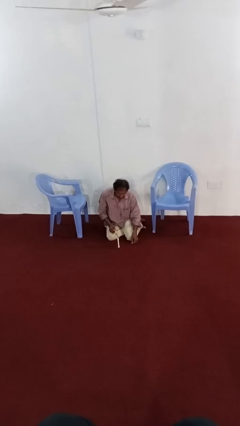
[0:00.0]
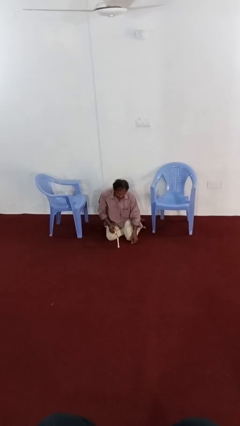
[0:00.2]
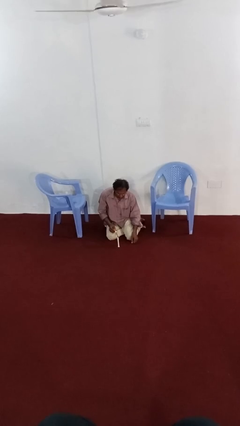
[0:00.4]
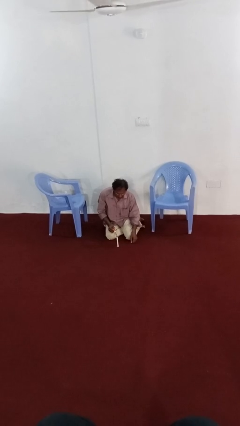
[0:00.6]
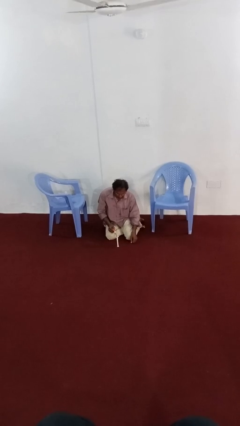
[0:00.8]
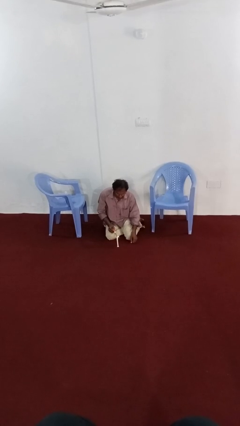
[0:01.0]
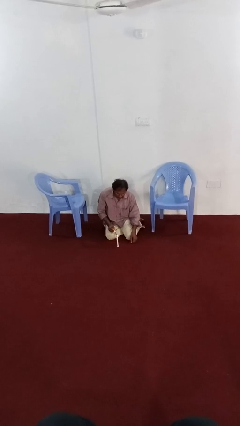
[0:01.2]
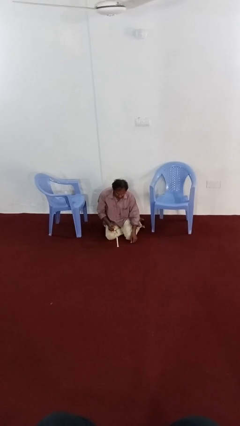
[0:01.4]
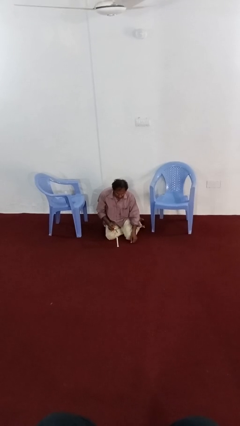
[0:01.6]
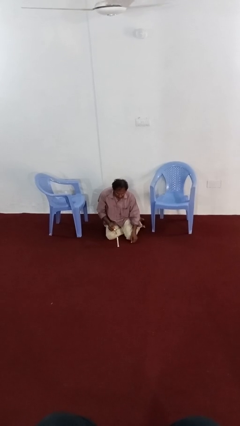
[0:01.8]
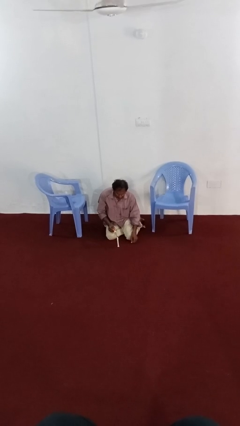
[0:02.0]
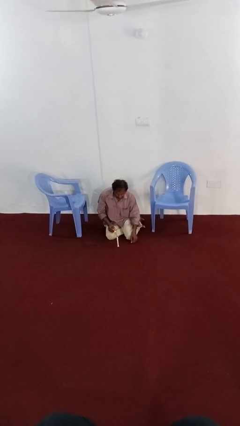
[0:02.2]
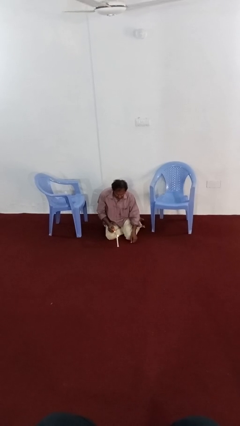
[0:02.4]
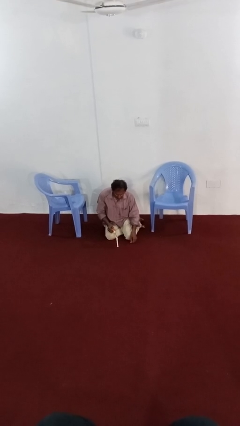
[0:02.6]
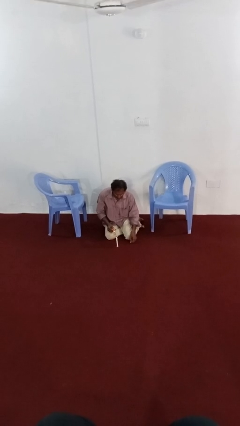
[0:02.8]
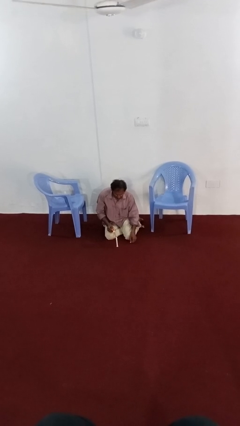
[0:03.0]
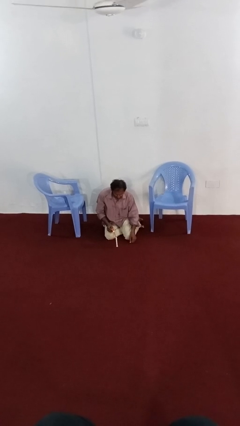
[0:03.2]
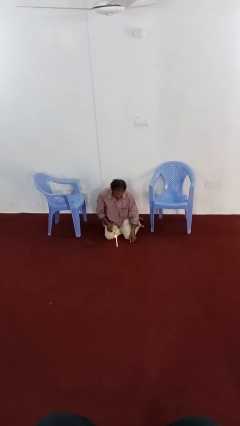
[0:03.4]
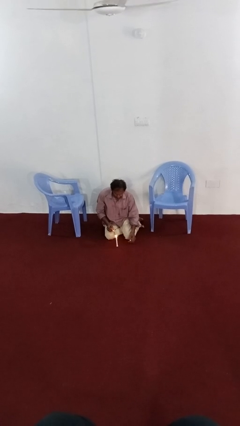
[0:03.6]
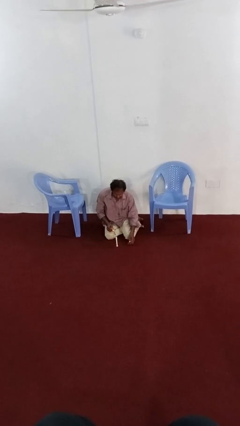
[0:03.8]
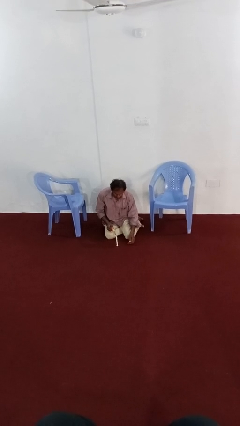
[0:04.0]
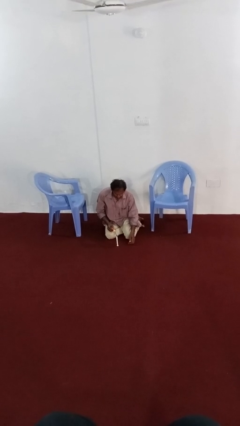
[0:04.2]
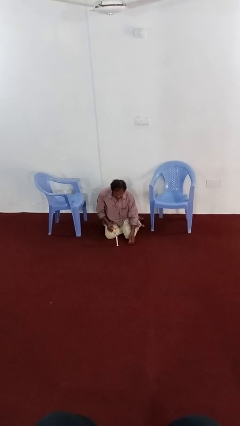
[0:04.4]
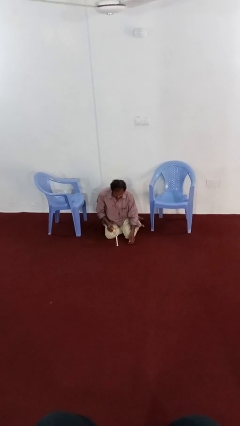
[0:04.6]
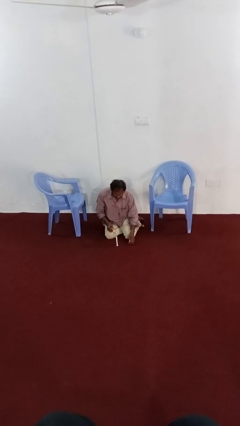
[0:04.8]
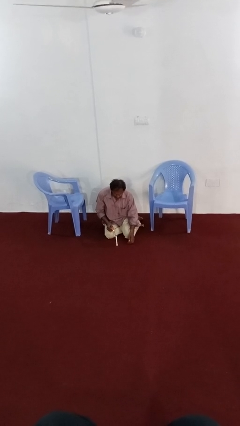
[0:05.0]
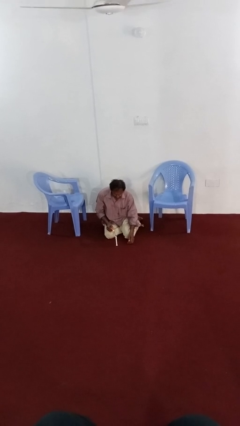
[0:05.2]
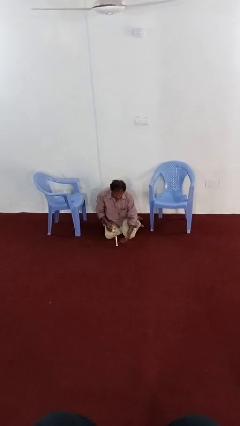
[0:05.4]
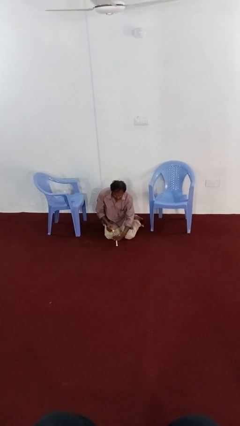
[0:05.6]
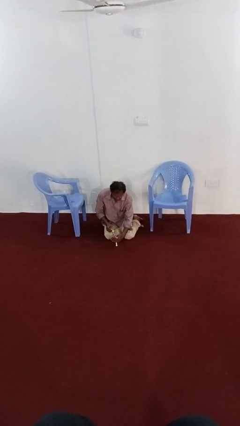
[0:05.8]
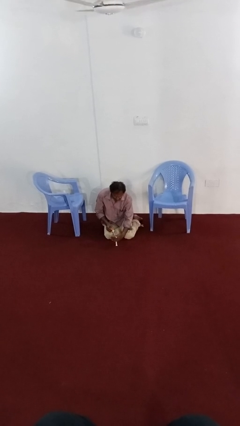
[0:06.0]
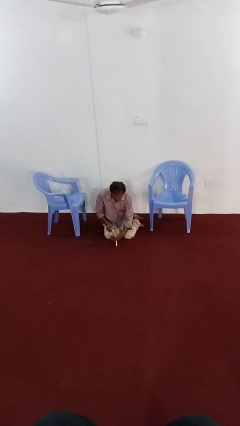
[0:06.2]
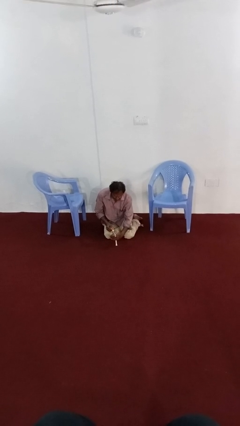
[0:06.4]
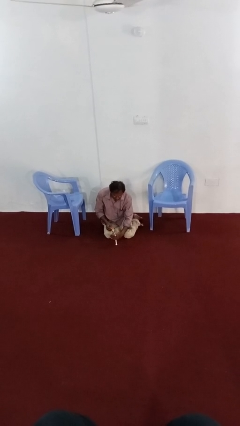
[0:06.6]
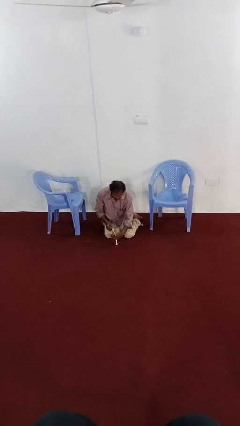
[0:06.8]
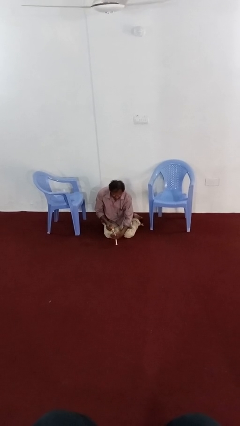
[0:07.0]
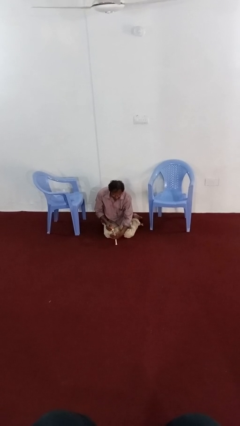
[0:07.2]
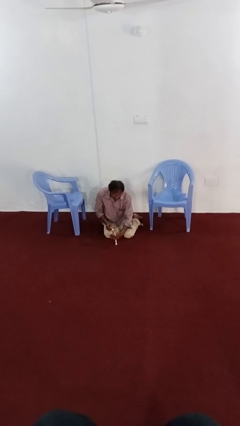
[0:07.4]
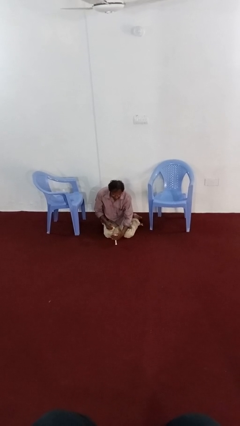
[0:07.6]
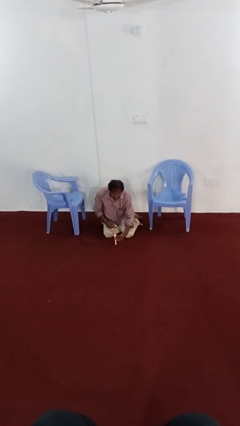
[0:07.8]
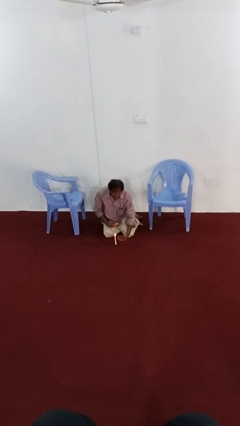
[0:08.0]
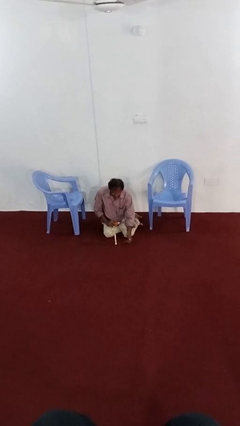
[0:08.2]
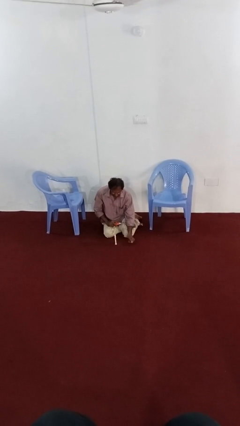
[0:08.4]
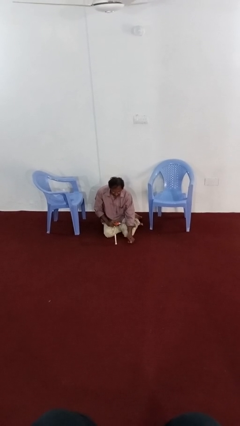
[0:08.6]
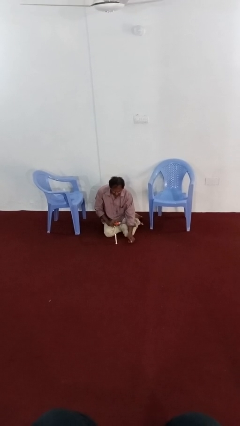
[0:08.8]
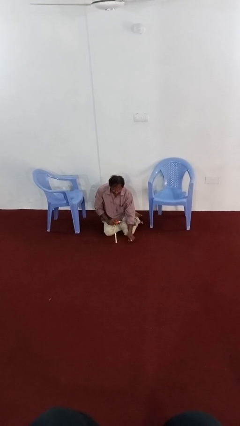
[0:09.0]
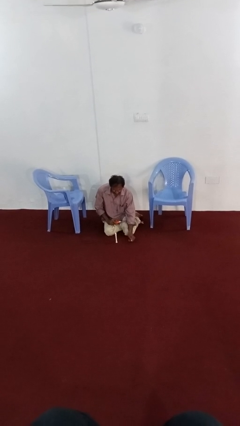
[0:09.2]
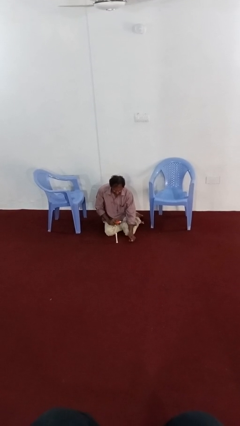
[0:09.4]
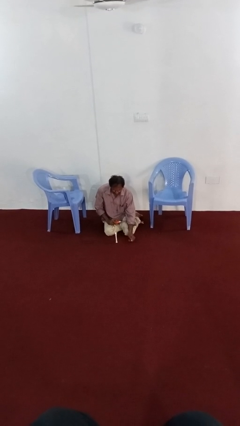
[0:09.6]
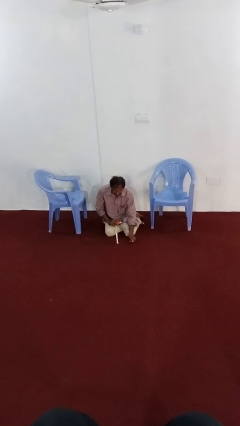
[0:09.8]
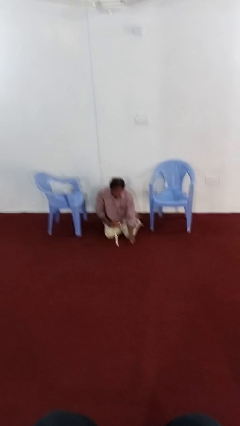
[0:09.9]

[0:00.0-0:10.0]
person lights candle

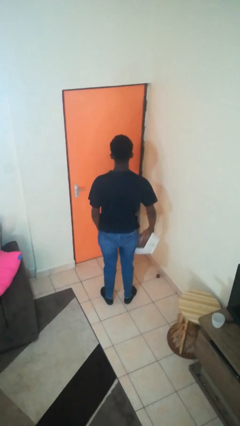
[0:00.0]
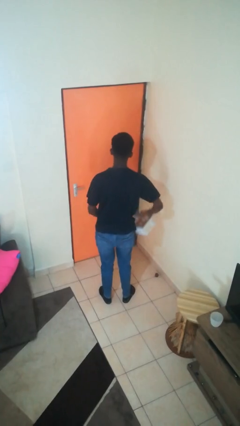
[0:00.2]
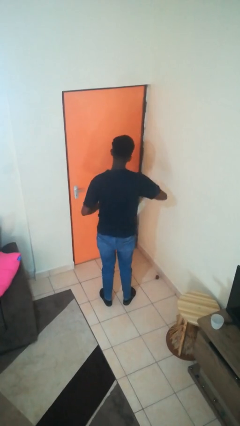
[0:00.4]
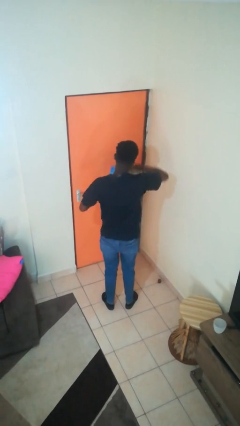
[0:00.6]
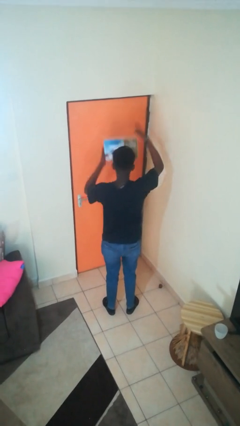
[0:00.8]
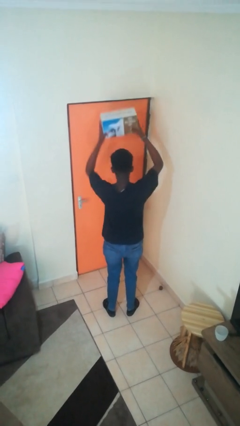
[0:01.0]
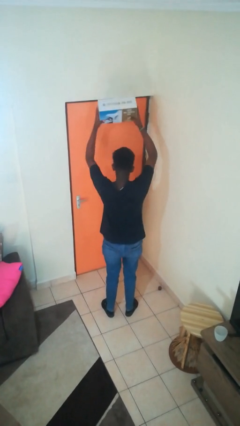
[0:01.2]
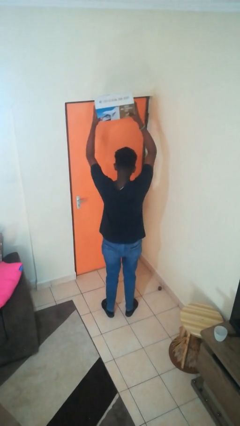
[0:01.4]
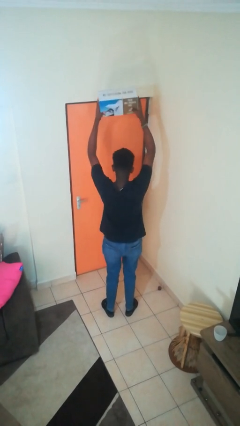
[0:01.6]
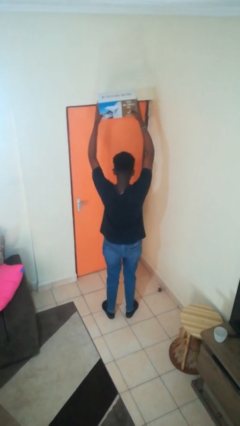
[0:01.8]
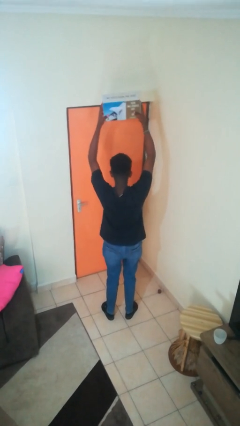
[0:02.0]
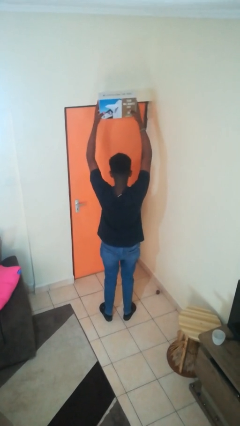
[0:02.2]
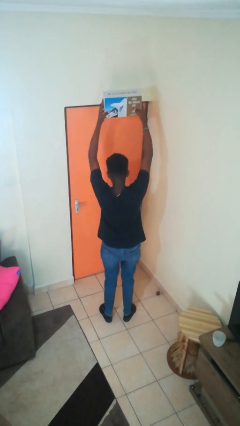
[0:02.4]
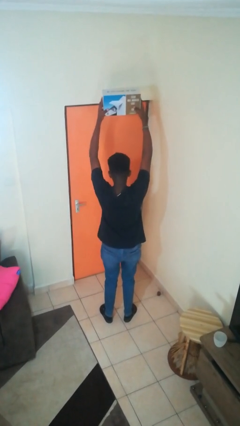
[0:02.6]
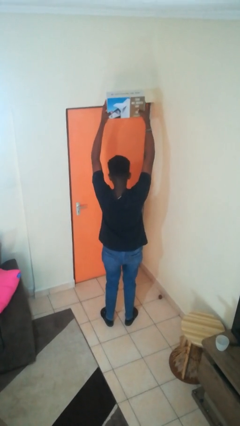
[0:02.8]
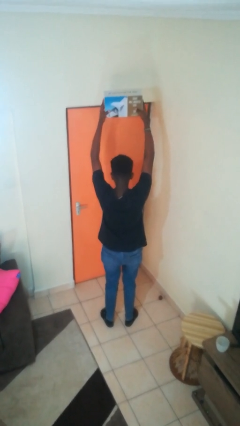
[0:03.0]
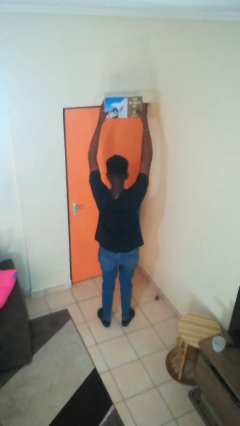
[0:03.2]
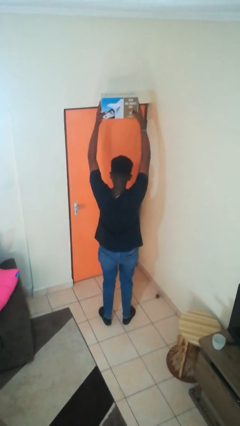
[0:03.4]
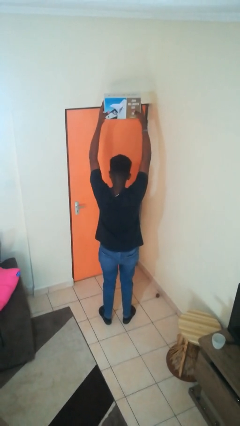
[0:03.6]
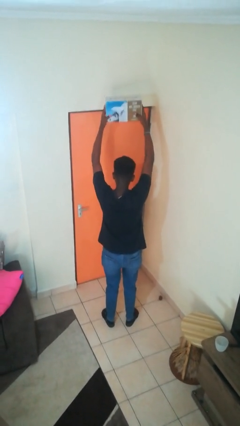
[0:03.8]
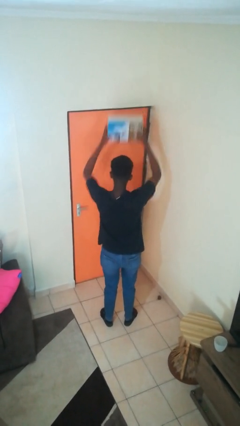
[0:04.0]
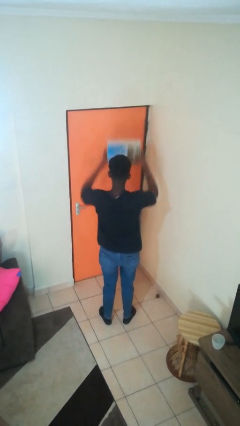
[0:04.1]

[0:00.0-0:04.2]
person holds object above head

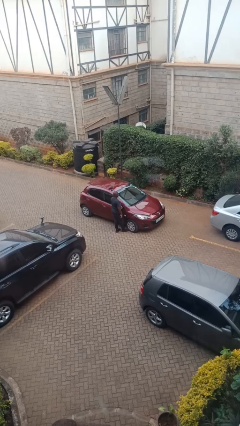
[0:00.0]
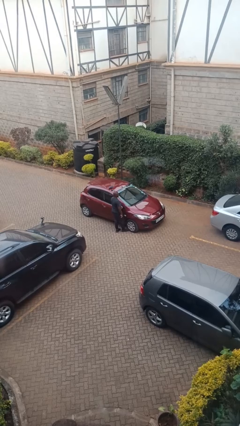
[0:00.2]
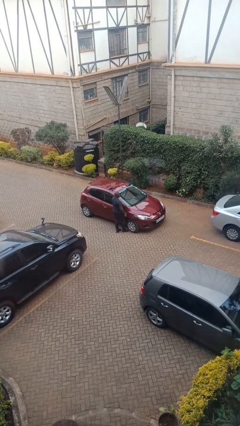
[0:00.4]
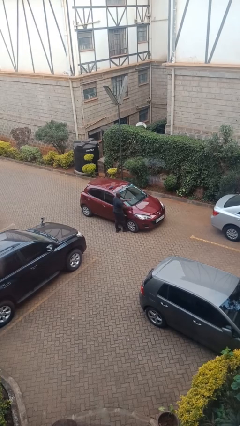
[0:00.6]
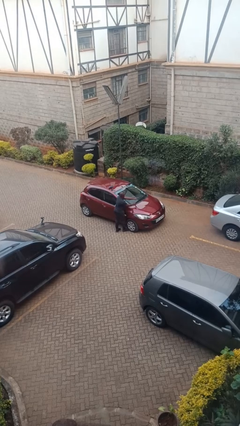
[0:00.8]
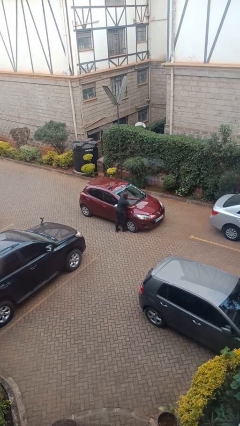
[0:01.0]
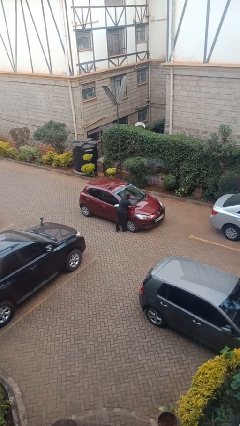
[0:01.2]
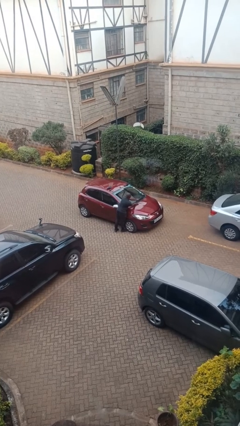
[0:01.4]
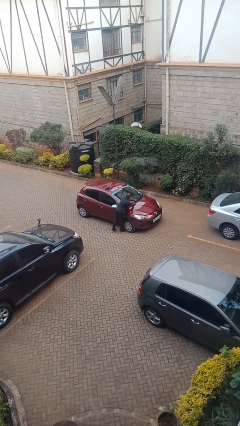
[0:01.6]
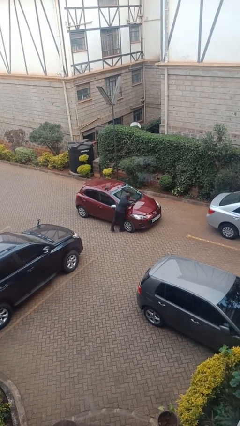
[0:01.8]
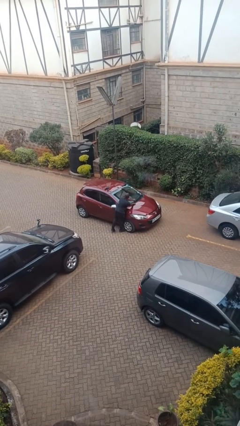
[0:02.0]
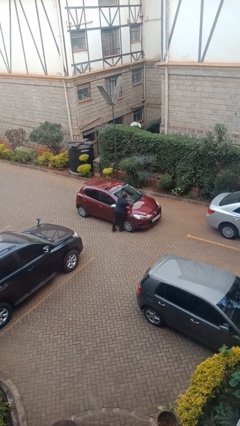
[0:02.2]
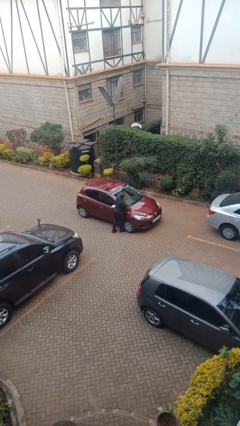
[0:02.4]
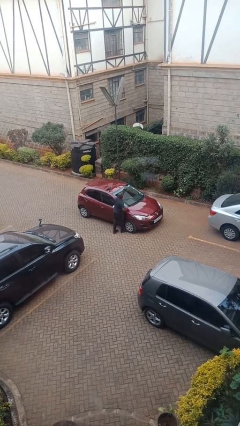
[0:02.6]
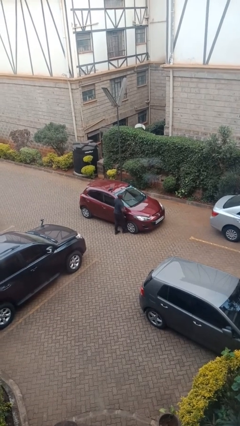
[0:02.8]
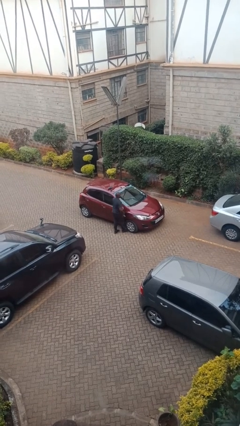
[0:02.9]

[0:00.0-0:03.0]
person flips down car wipers

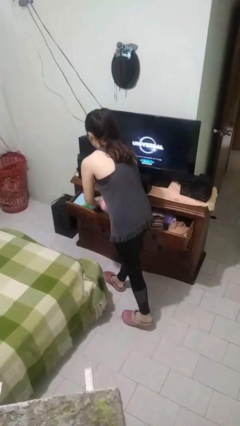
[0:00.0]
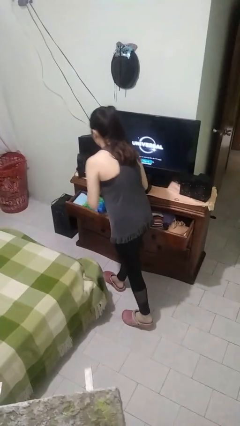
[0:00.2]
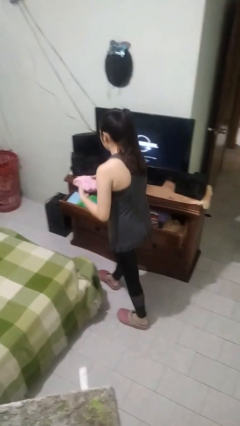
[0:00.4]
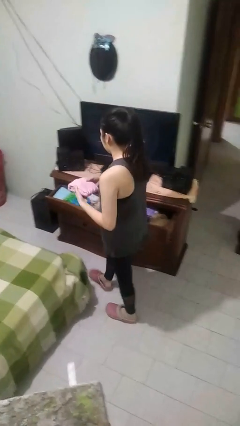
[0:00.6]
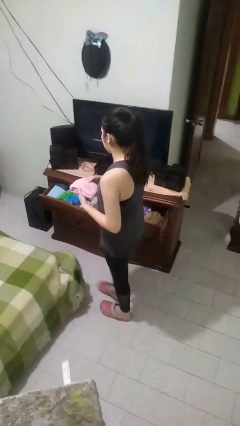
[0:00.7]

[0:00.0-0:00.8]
person takes clothes from dresser
